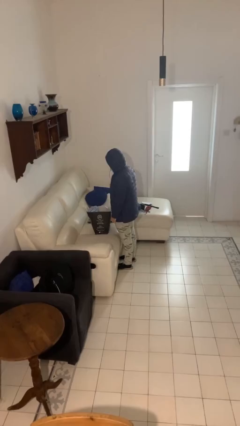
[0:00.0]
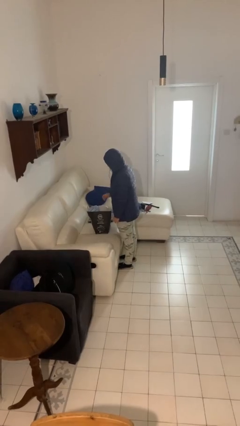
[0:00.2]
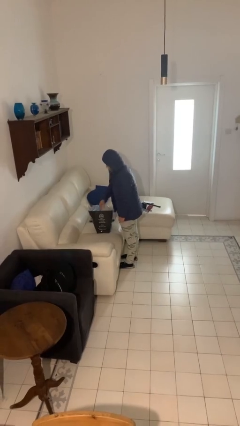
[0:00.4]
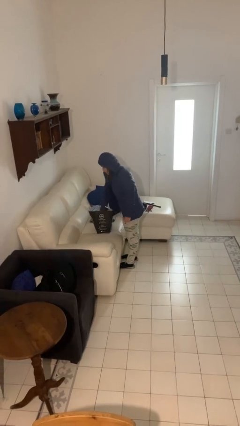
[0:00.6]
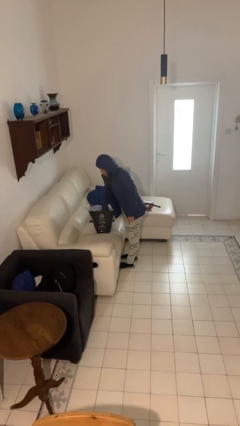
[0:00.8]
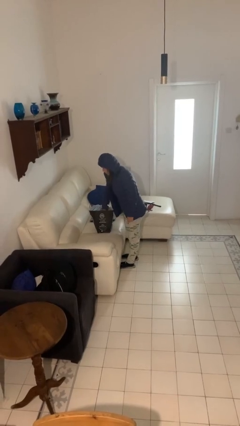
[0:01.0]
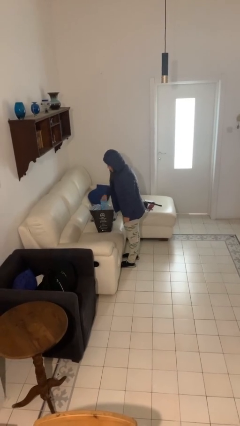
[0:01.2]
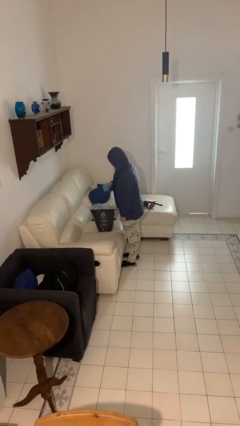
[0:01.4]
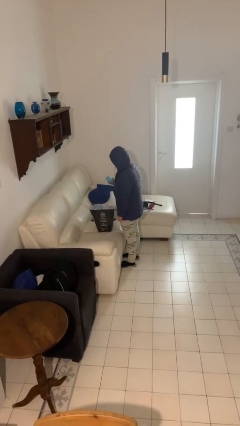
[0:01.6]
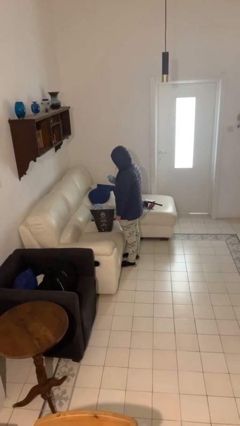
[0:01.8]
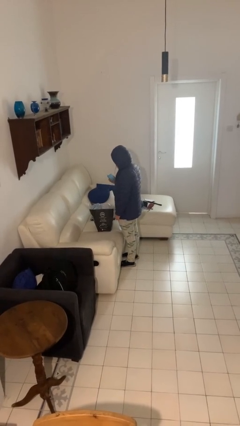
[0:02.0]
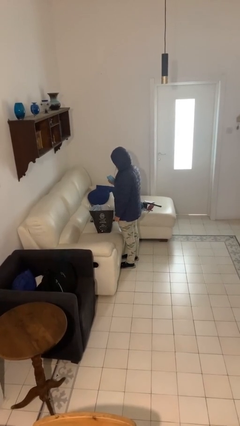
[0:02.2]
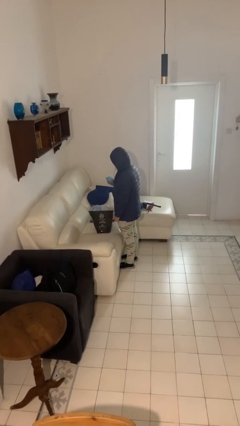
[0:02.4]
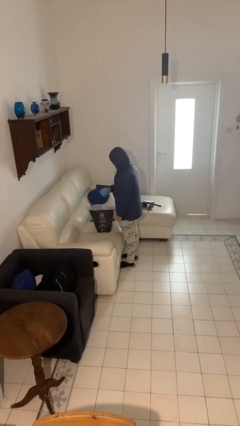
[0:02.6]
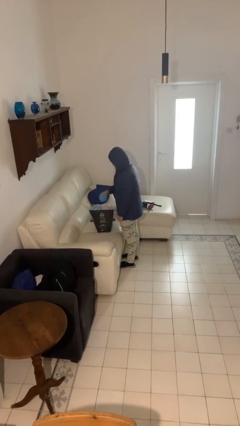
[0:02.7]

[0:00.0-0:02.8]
person takes object from bag

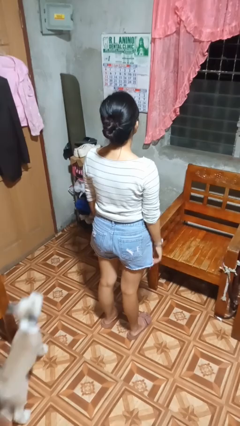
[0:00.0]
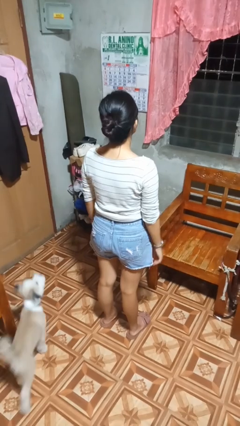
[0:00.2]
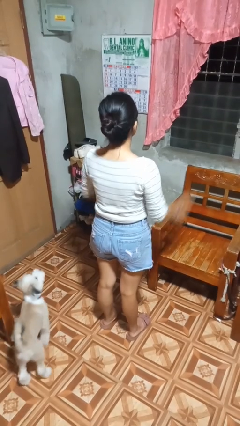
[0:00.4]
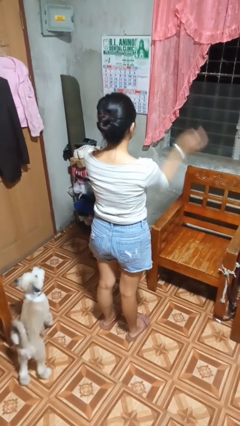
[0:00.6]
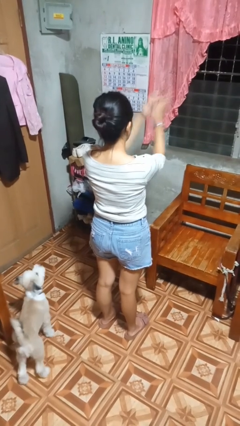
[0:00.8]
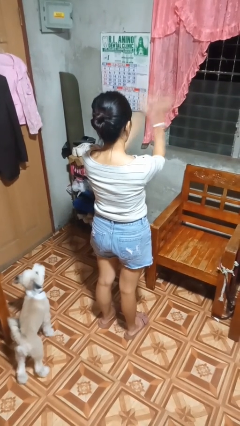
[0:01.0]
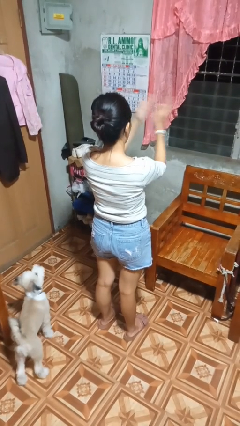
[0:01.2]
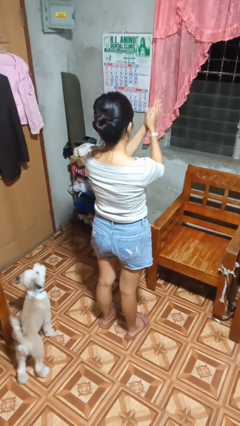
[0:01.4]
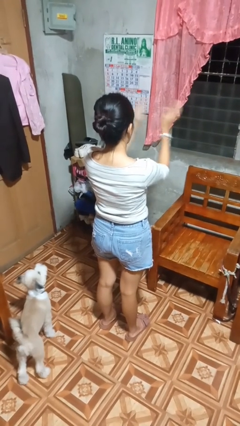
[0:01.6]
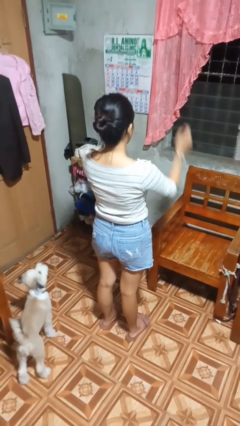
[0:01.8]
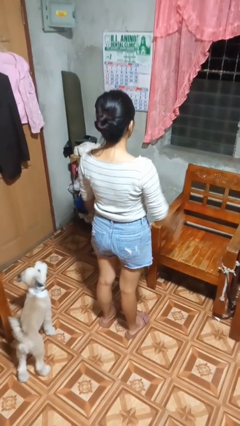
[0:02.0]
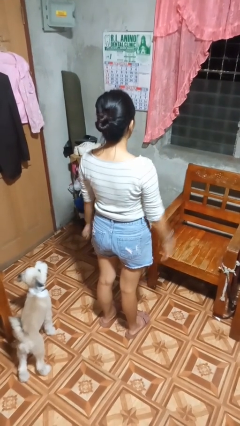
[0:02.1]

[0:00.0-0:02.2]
person claps hands

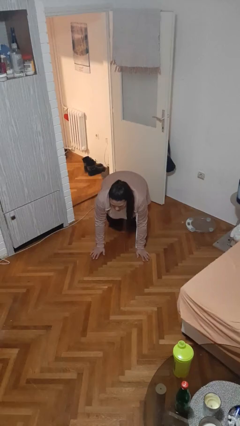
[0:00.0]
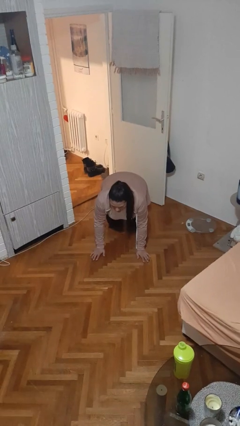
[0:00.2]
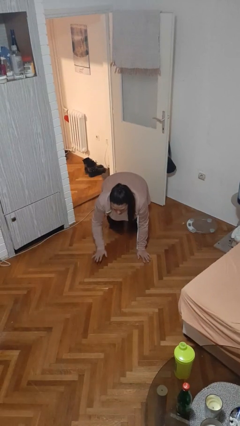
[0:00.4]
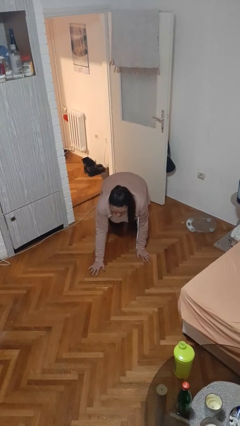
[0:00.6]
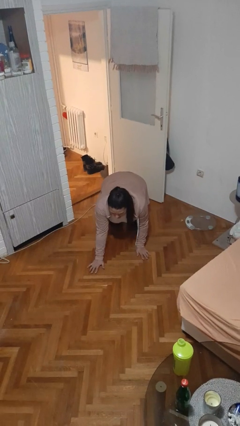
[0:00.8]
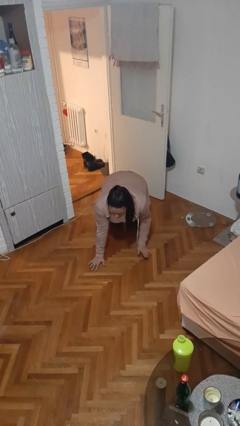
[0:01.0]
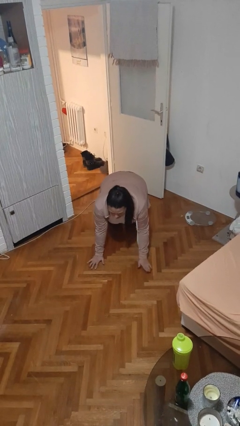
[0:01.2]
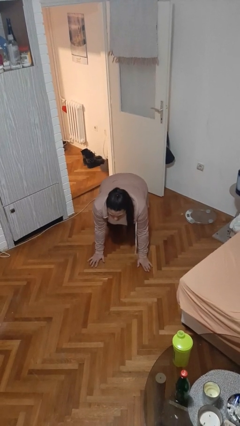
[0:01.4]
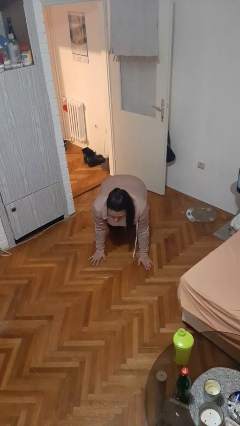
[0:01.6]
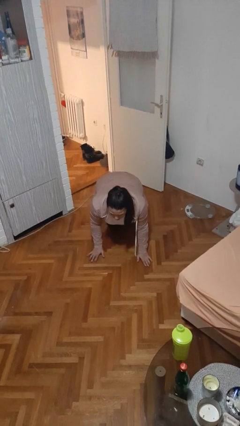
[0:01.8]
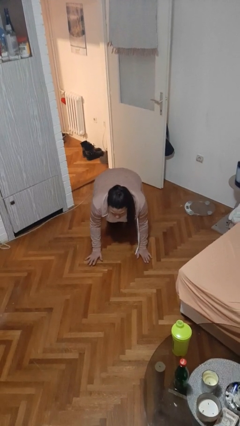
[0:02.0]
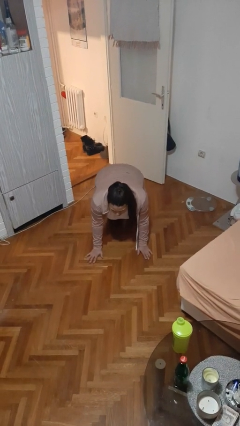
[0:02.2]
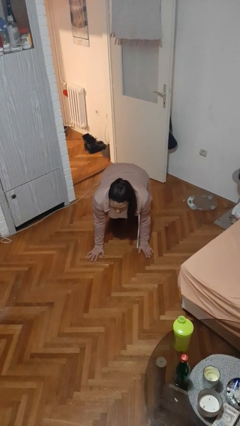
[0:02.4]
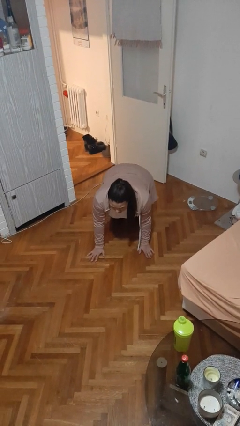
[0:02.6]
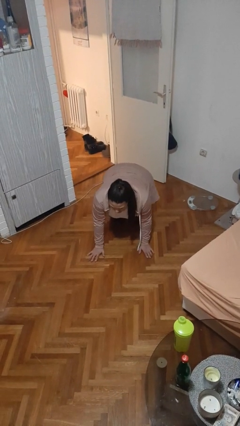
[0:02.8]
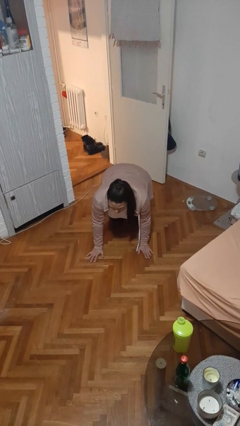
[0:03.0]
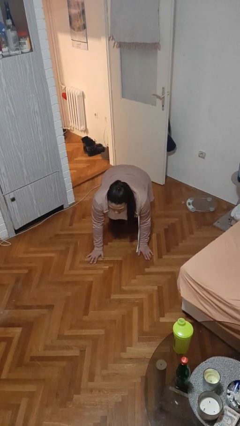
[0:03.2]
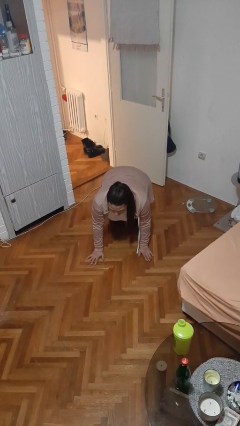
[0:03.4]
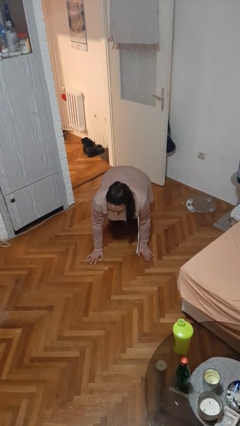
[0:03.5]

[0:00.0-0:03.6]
person crawls

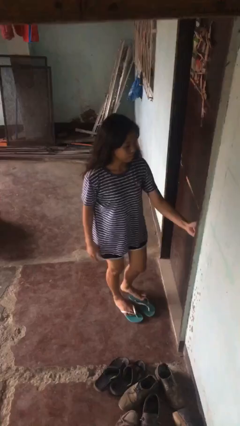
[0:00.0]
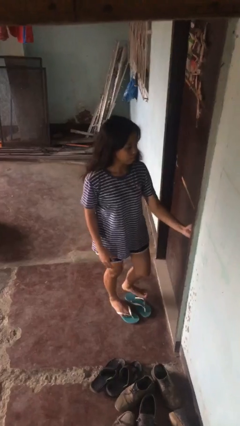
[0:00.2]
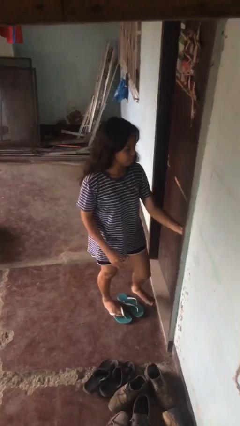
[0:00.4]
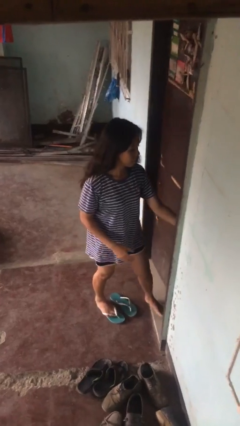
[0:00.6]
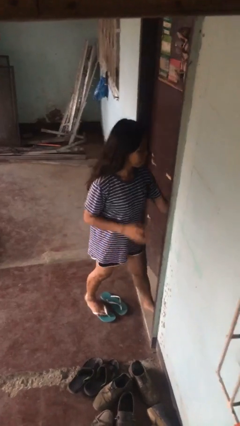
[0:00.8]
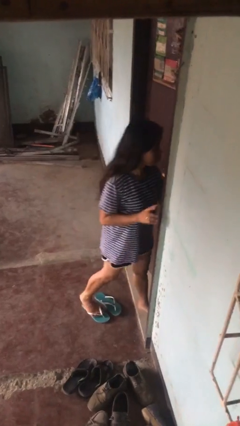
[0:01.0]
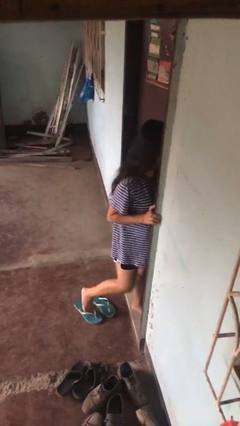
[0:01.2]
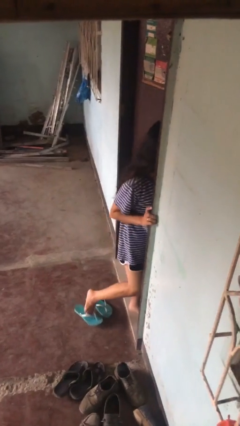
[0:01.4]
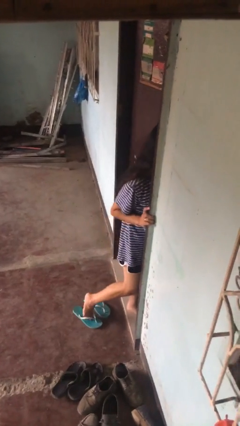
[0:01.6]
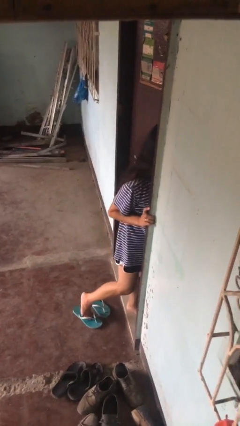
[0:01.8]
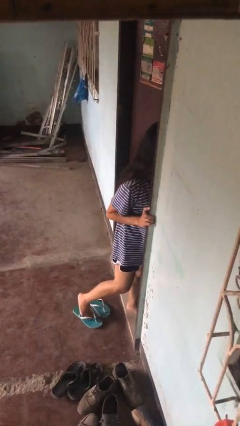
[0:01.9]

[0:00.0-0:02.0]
person opens facility door

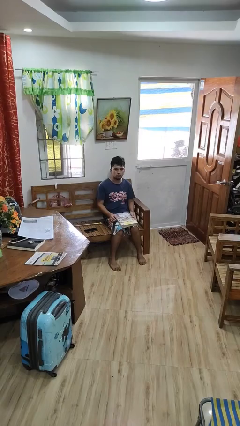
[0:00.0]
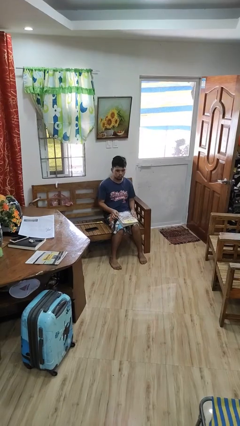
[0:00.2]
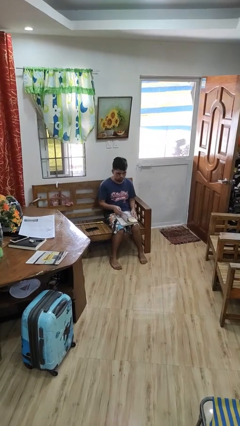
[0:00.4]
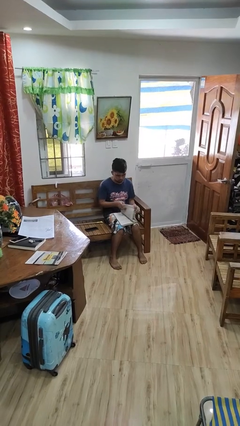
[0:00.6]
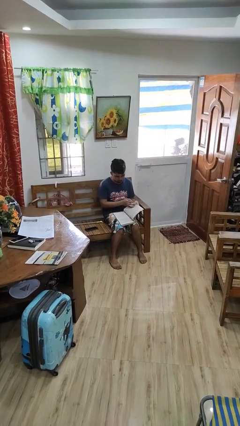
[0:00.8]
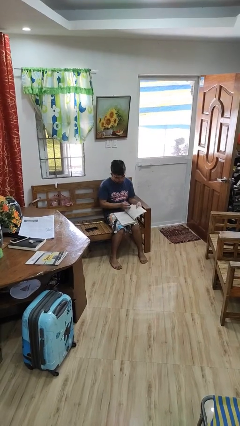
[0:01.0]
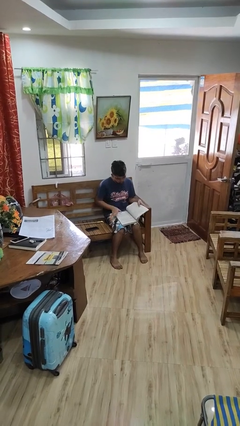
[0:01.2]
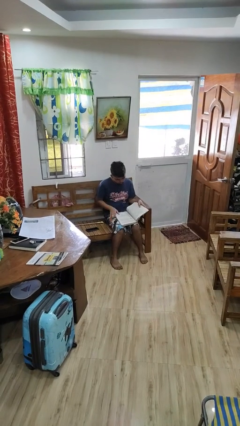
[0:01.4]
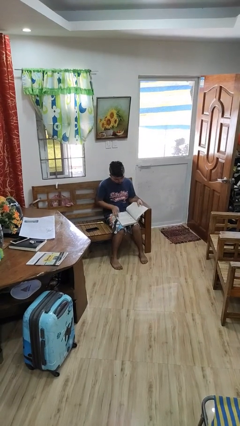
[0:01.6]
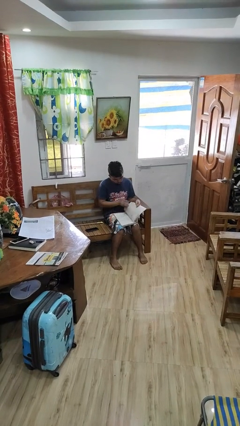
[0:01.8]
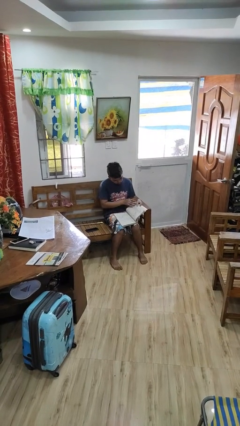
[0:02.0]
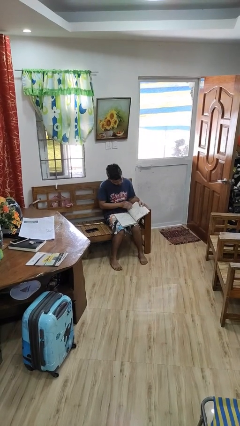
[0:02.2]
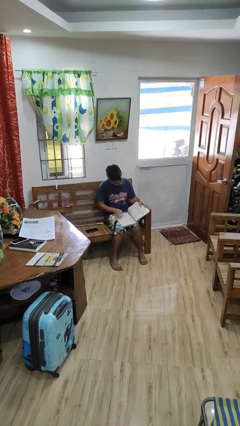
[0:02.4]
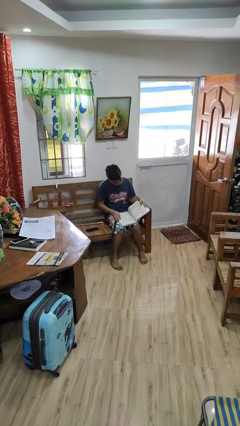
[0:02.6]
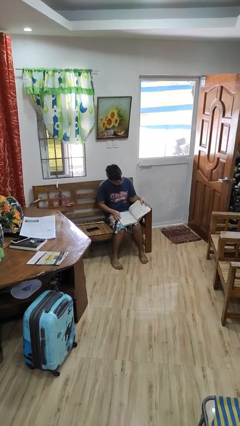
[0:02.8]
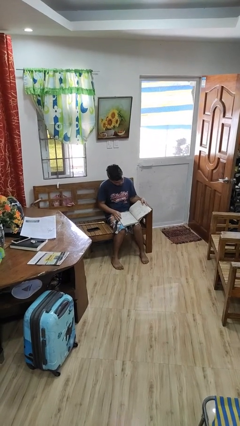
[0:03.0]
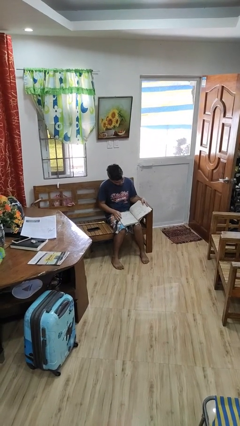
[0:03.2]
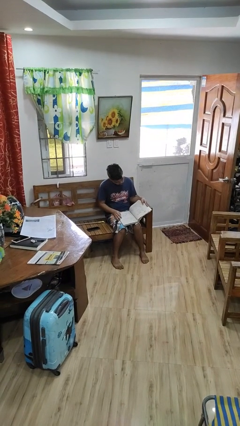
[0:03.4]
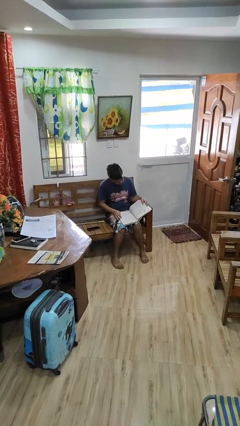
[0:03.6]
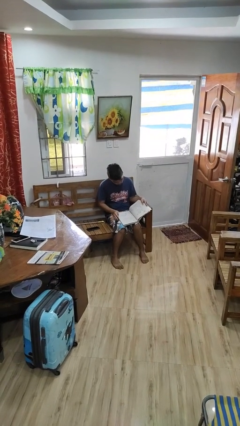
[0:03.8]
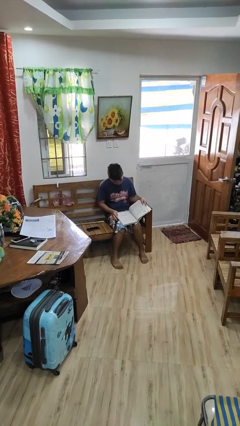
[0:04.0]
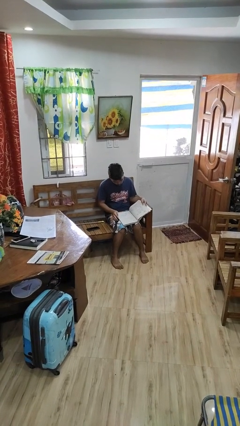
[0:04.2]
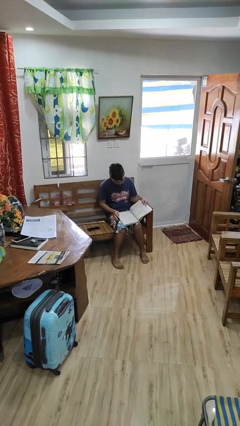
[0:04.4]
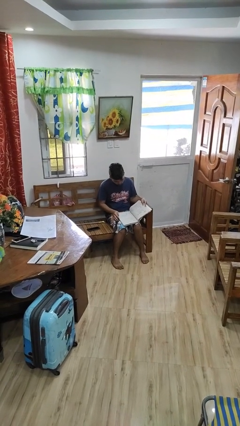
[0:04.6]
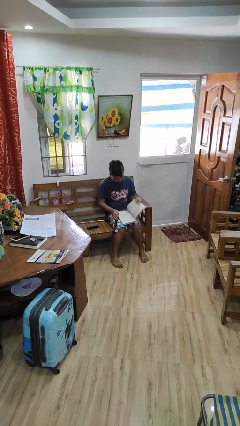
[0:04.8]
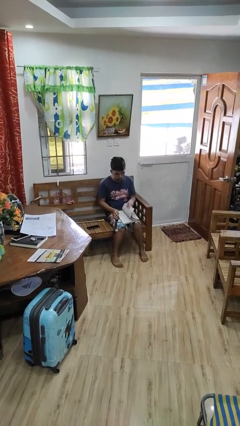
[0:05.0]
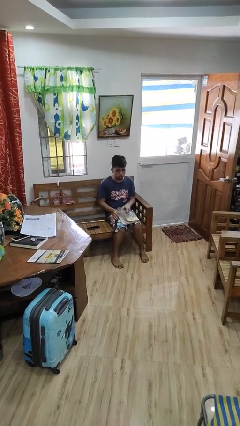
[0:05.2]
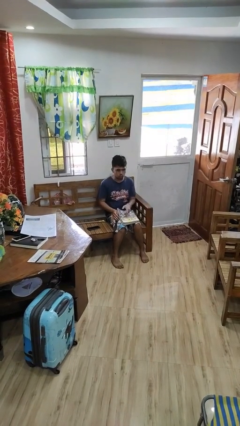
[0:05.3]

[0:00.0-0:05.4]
person reads book

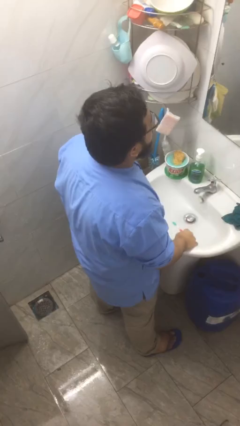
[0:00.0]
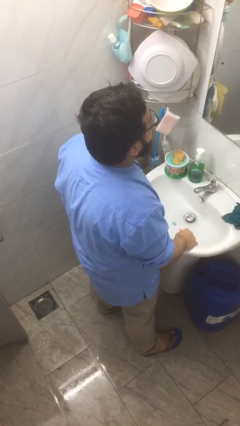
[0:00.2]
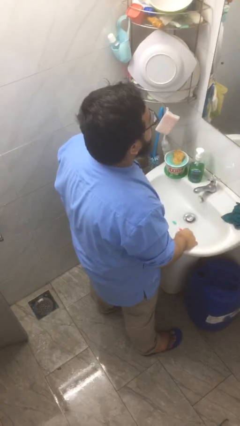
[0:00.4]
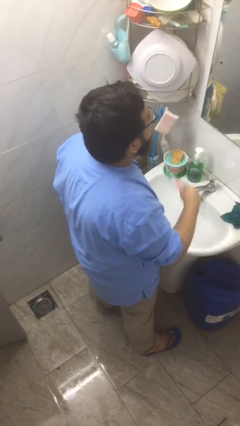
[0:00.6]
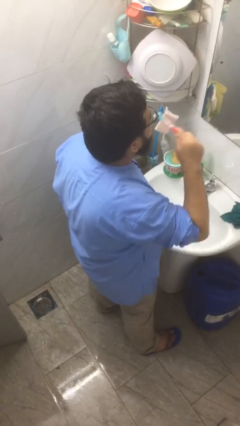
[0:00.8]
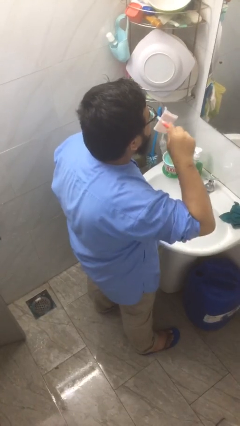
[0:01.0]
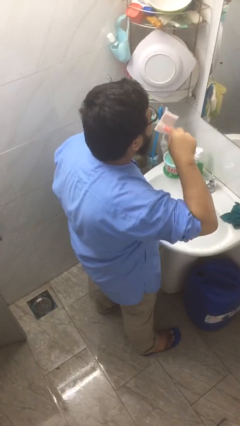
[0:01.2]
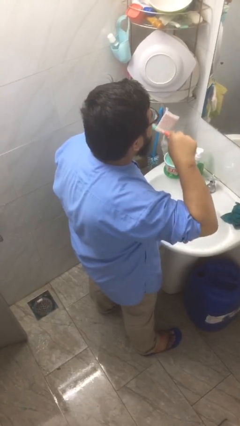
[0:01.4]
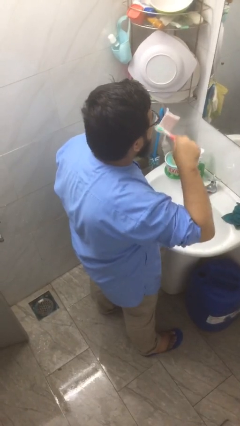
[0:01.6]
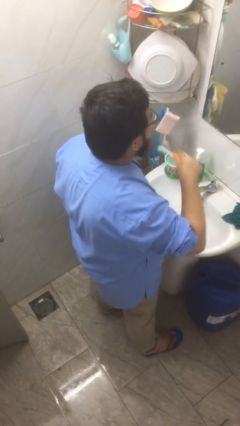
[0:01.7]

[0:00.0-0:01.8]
person brushes teeth
